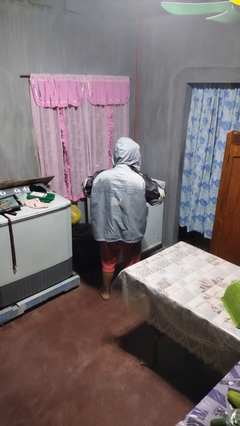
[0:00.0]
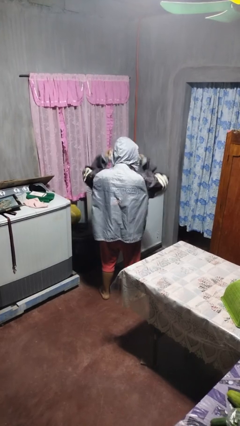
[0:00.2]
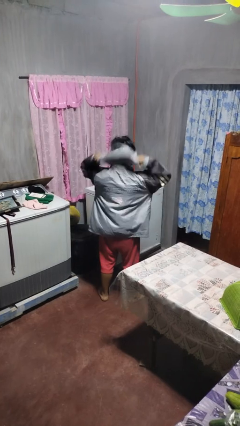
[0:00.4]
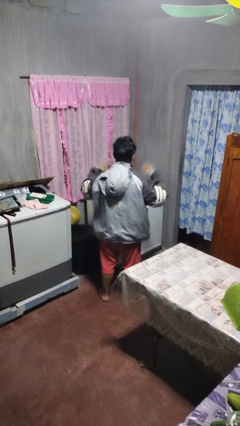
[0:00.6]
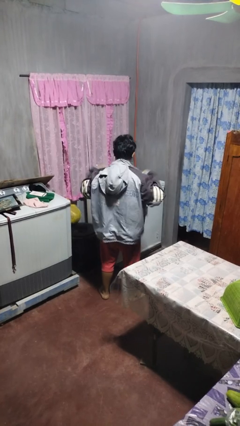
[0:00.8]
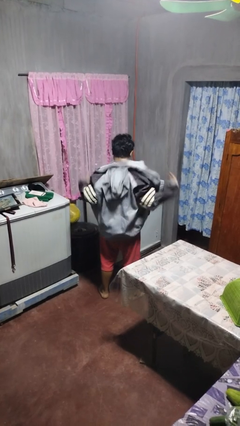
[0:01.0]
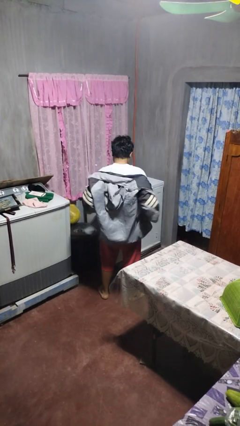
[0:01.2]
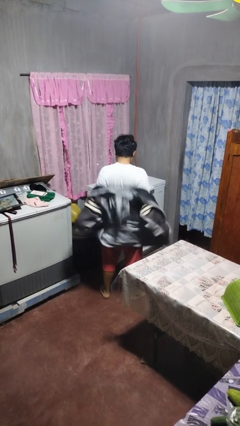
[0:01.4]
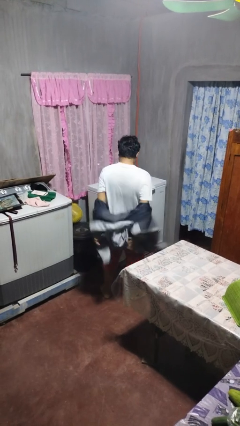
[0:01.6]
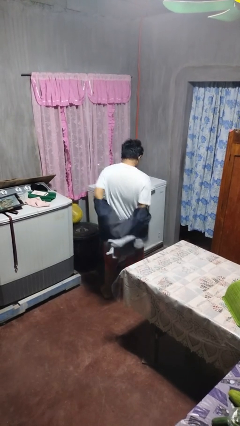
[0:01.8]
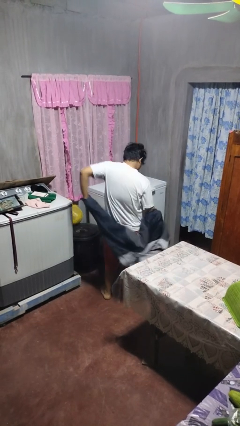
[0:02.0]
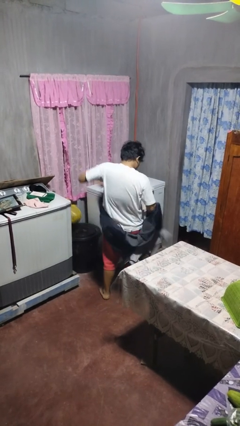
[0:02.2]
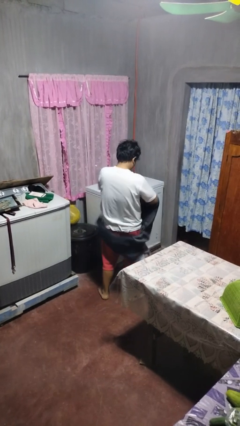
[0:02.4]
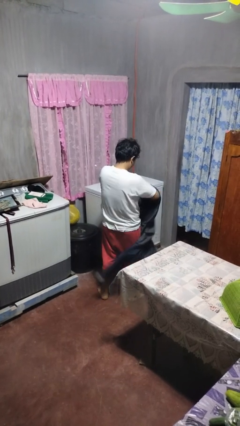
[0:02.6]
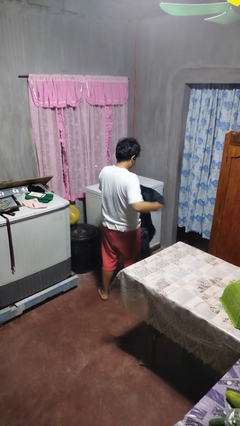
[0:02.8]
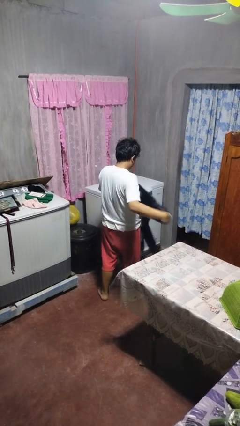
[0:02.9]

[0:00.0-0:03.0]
person takes off hoodie

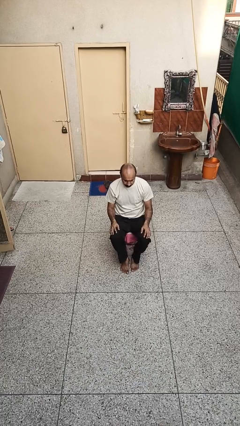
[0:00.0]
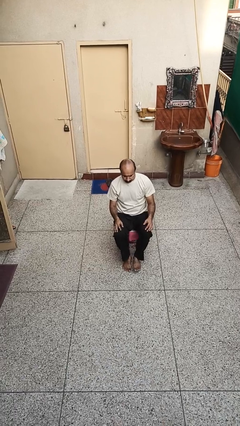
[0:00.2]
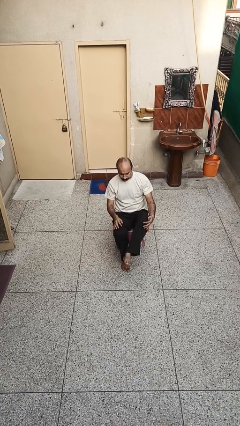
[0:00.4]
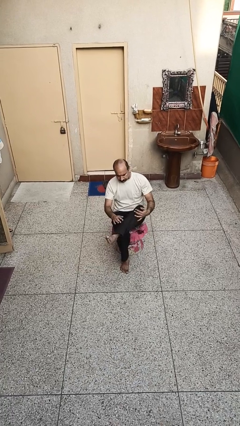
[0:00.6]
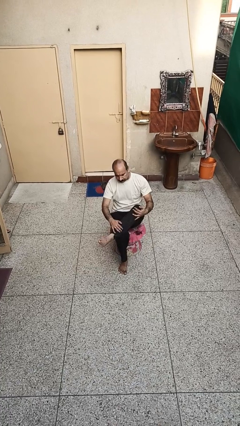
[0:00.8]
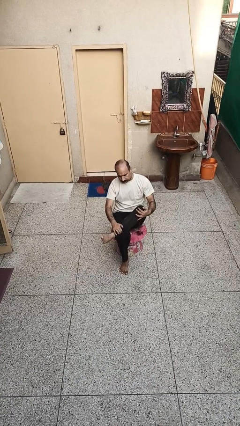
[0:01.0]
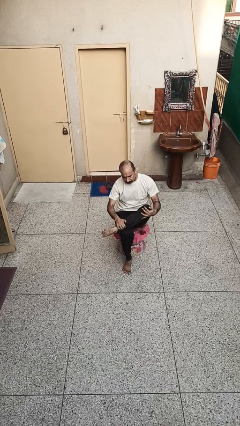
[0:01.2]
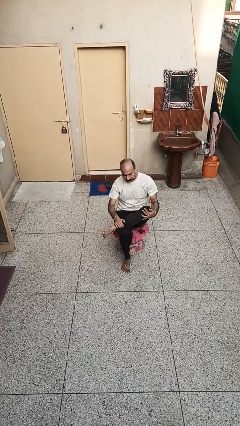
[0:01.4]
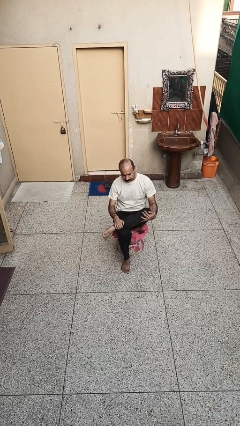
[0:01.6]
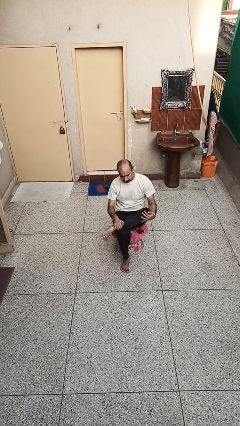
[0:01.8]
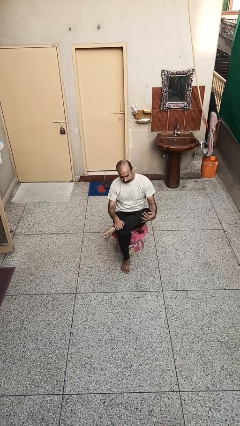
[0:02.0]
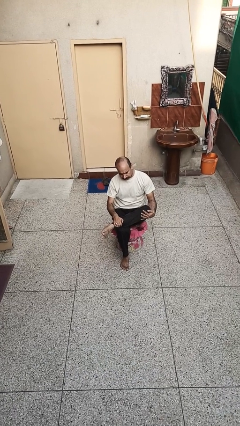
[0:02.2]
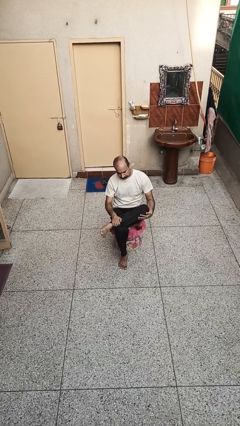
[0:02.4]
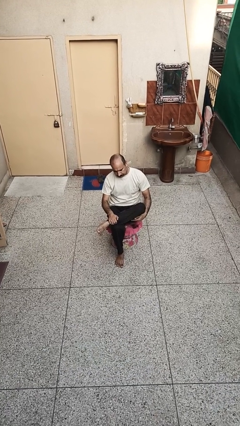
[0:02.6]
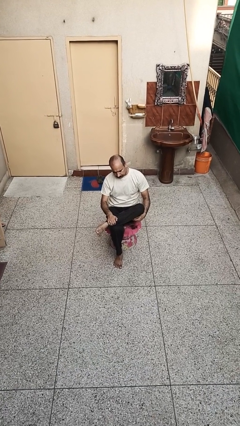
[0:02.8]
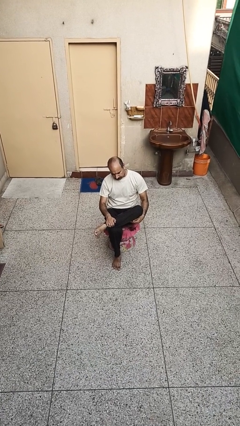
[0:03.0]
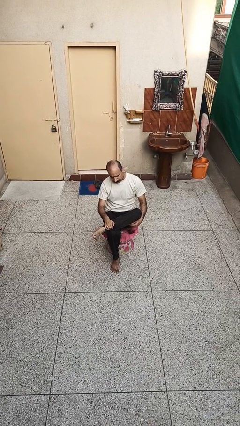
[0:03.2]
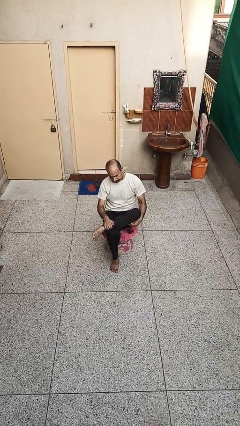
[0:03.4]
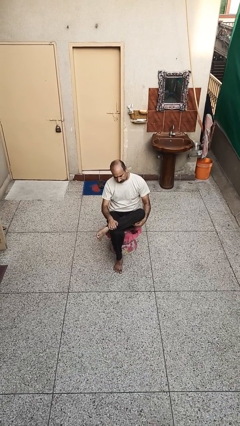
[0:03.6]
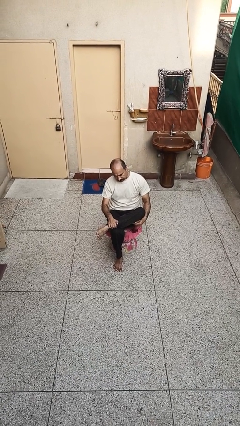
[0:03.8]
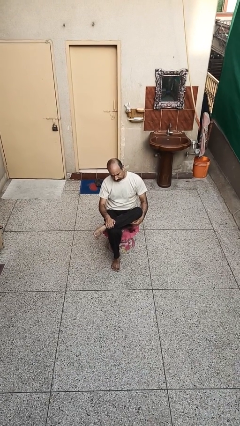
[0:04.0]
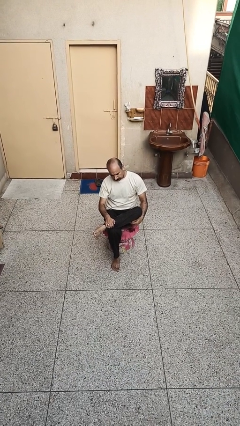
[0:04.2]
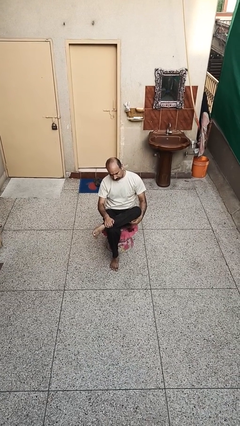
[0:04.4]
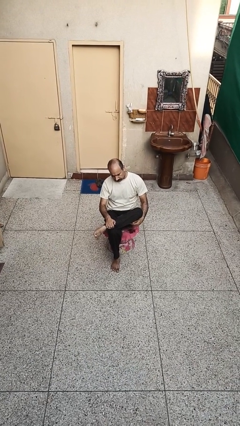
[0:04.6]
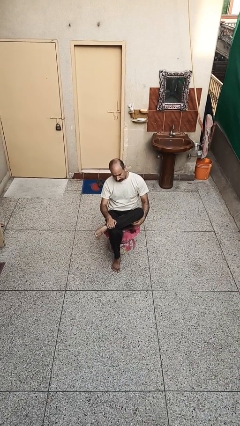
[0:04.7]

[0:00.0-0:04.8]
person crosses legs

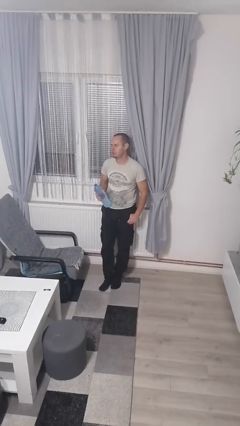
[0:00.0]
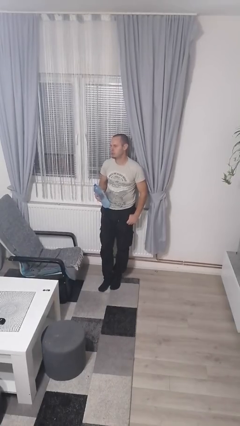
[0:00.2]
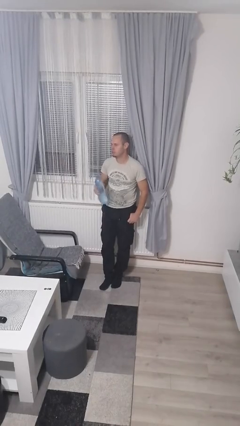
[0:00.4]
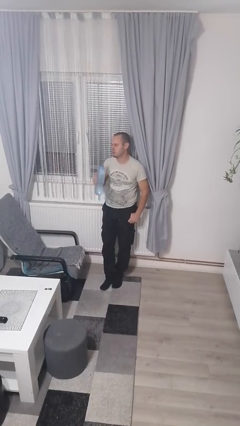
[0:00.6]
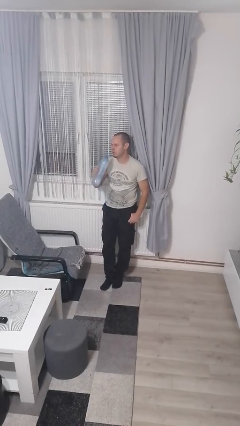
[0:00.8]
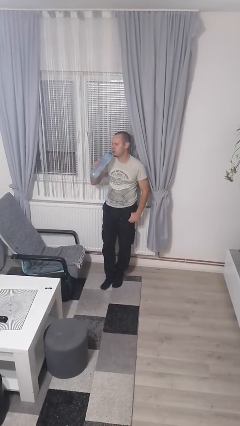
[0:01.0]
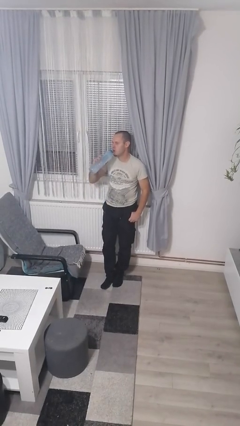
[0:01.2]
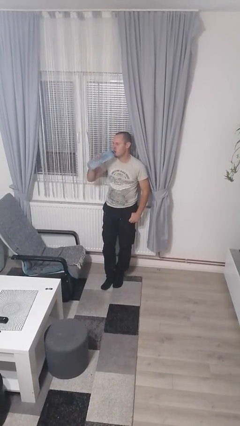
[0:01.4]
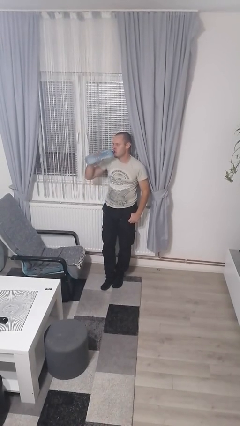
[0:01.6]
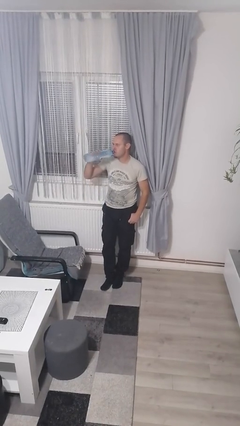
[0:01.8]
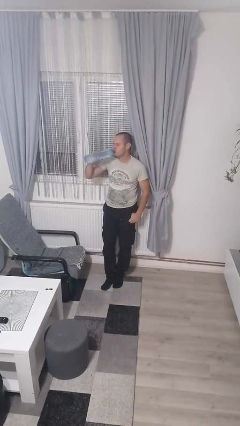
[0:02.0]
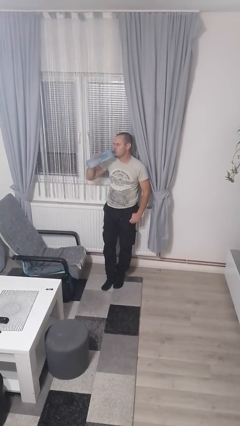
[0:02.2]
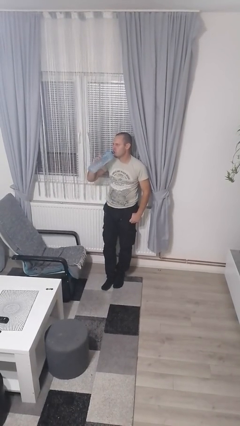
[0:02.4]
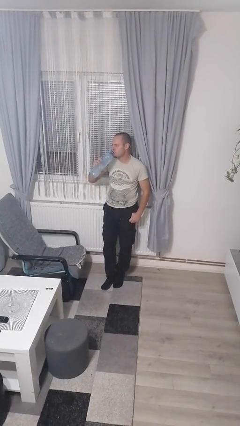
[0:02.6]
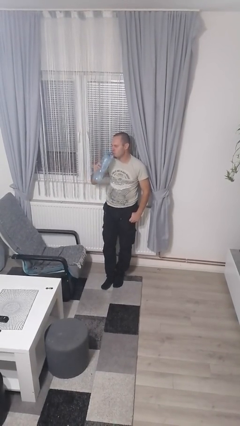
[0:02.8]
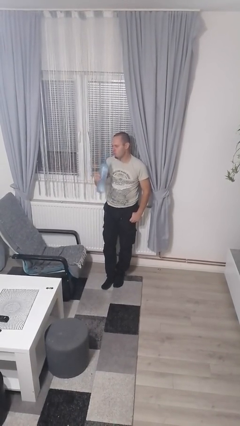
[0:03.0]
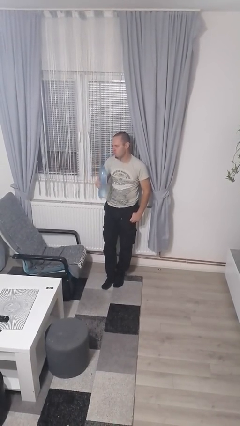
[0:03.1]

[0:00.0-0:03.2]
person drinks from bottle

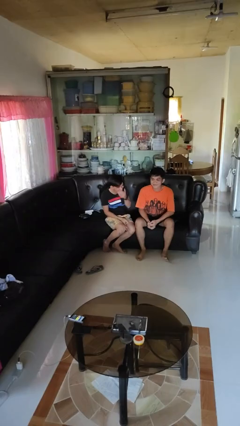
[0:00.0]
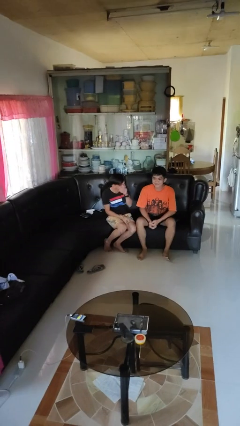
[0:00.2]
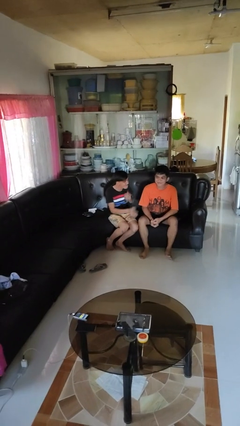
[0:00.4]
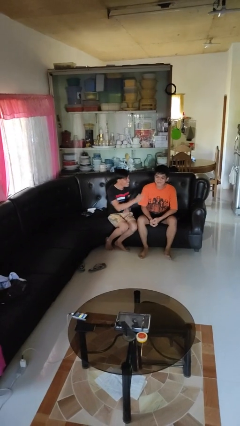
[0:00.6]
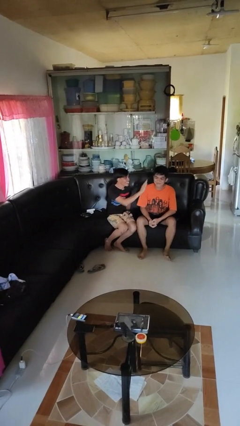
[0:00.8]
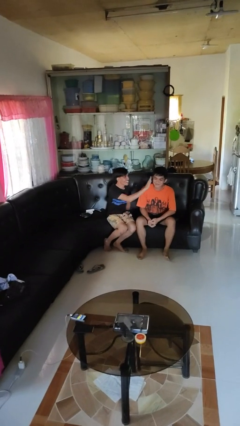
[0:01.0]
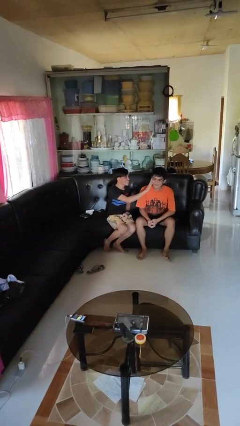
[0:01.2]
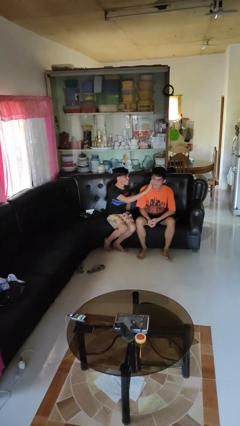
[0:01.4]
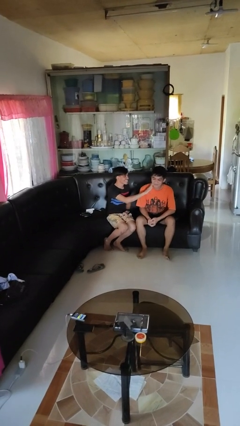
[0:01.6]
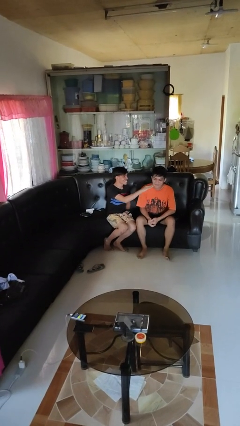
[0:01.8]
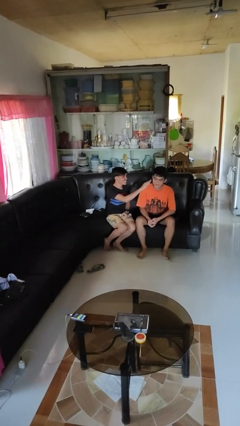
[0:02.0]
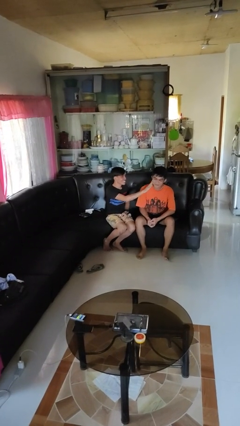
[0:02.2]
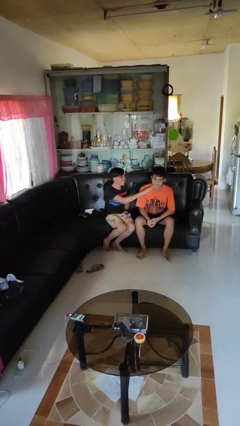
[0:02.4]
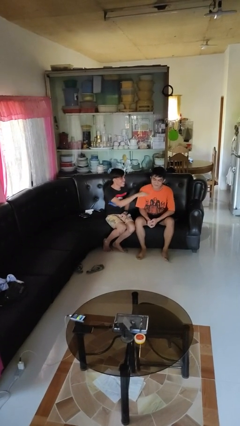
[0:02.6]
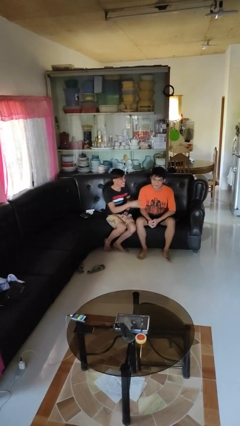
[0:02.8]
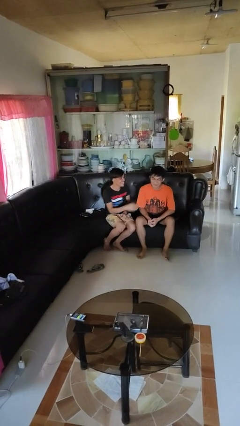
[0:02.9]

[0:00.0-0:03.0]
person touches face of person

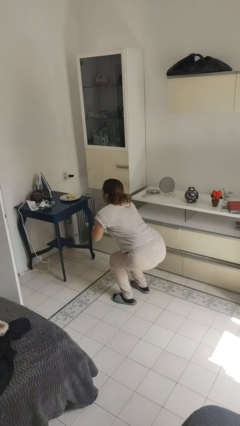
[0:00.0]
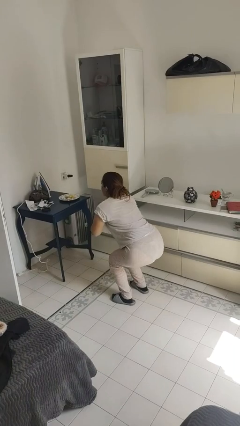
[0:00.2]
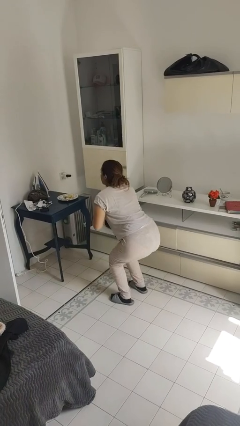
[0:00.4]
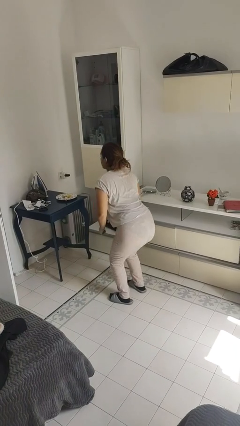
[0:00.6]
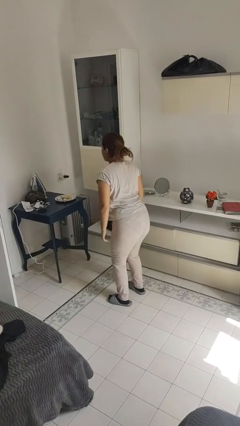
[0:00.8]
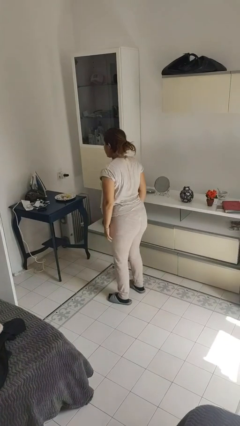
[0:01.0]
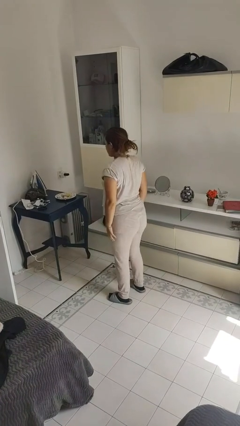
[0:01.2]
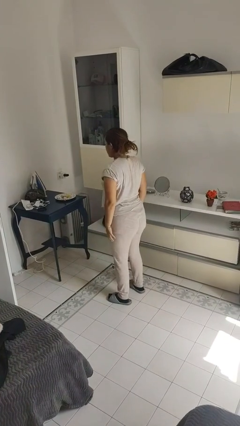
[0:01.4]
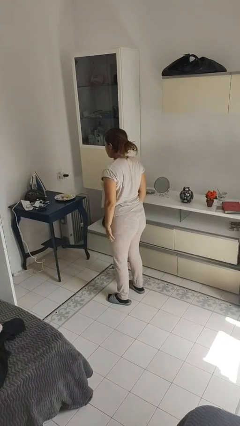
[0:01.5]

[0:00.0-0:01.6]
person stands up

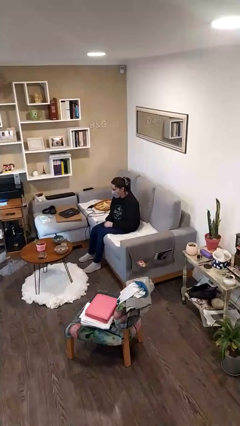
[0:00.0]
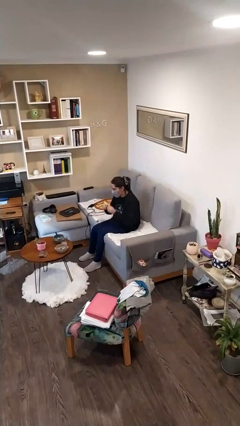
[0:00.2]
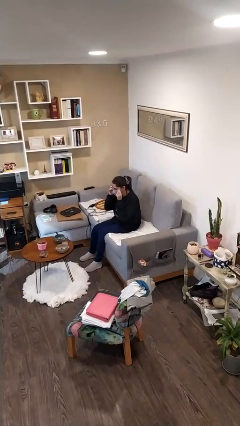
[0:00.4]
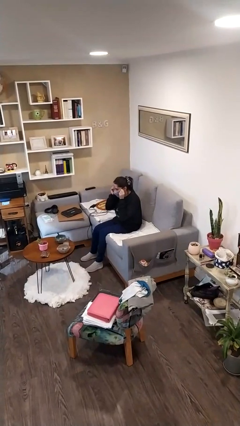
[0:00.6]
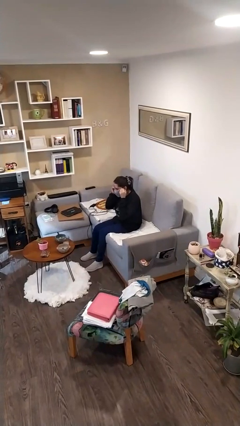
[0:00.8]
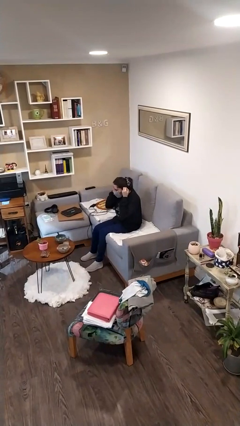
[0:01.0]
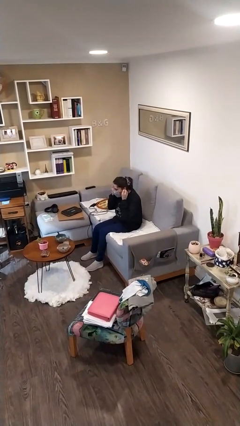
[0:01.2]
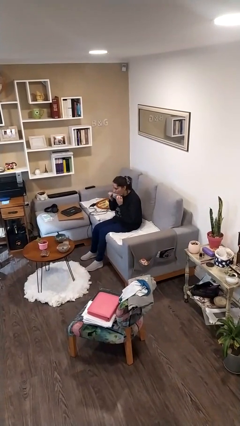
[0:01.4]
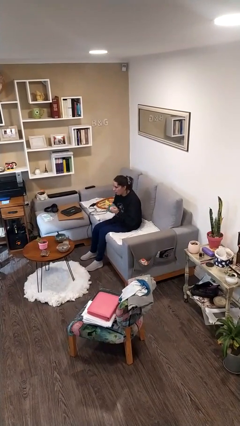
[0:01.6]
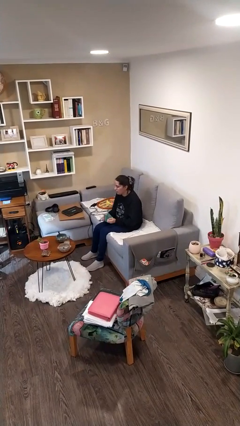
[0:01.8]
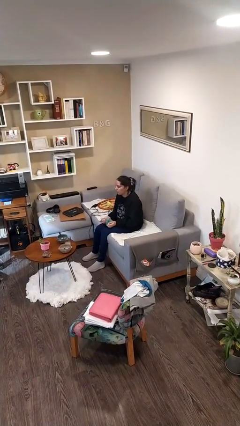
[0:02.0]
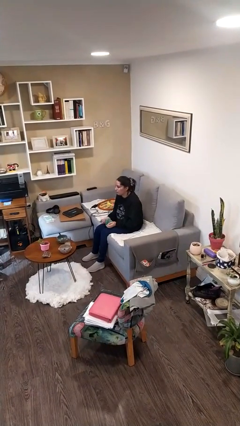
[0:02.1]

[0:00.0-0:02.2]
person takes off facemask
